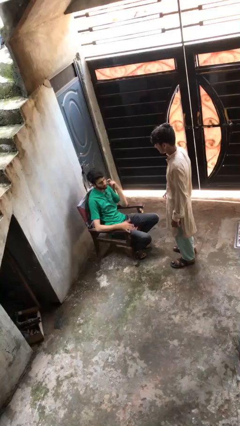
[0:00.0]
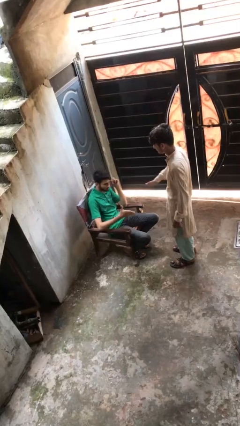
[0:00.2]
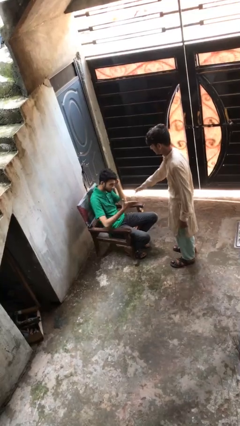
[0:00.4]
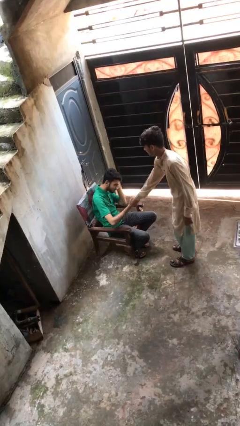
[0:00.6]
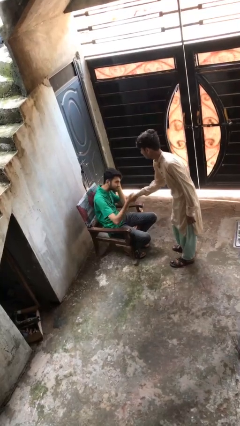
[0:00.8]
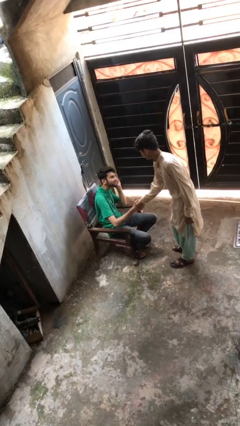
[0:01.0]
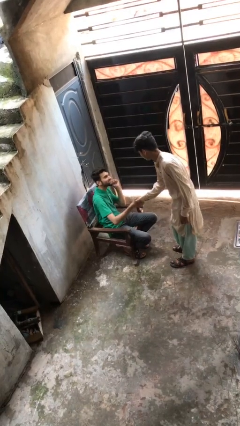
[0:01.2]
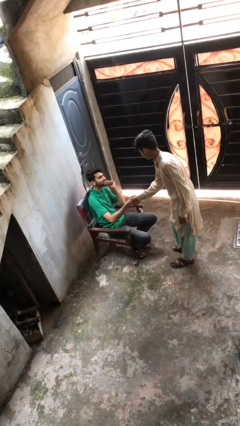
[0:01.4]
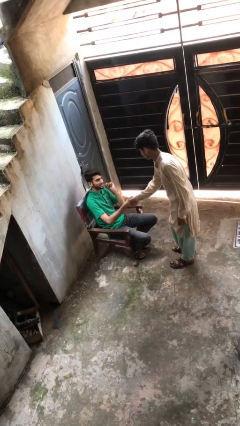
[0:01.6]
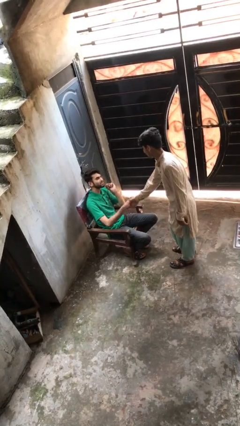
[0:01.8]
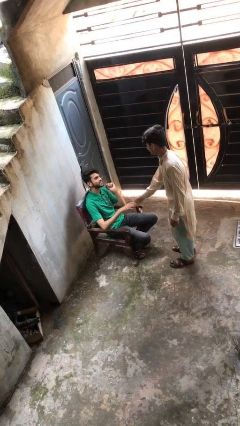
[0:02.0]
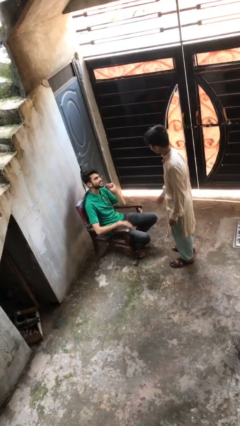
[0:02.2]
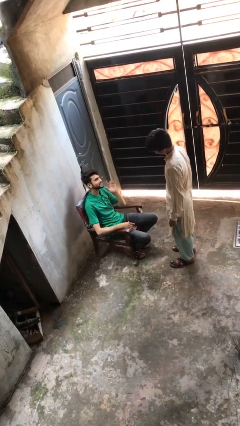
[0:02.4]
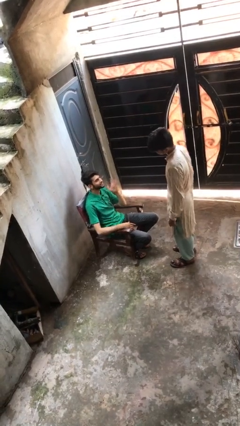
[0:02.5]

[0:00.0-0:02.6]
person shakes hand

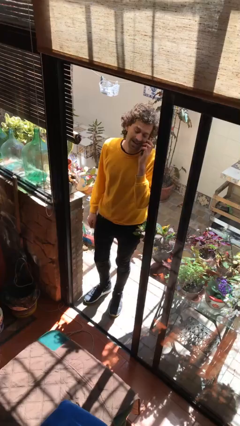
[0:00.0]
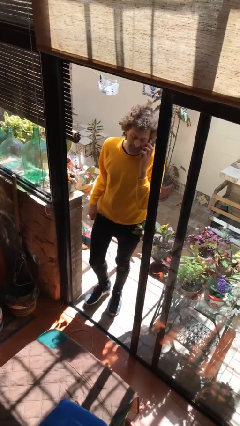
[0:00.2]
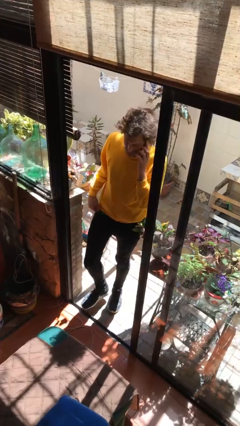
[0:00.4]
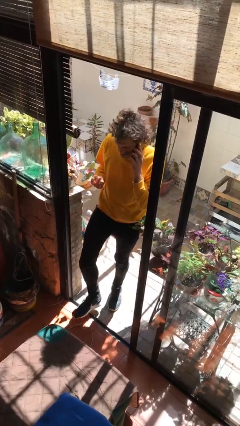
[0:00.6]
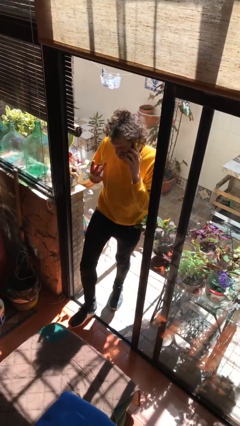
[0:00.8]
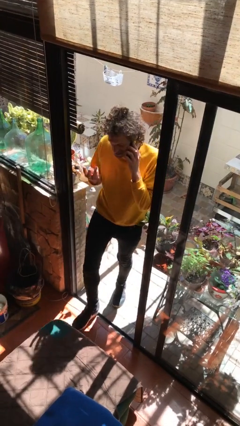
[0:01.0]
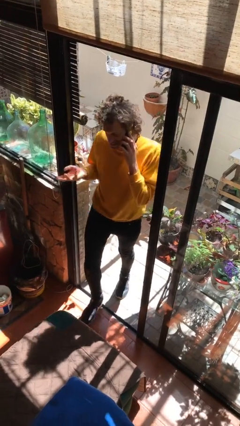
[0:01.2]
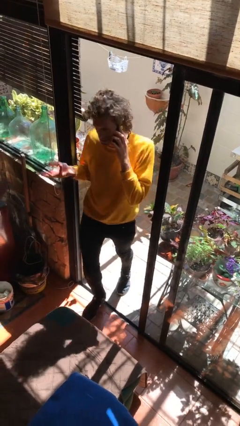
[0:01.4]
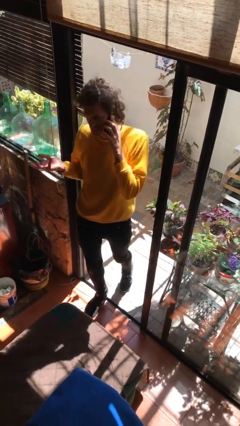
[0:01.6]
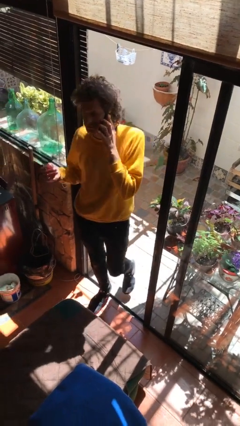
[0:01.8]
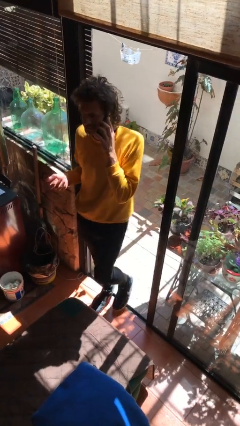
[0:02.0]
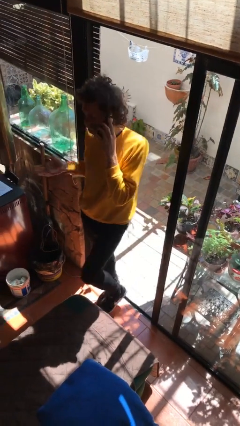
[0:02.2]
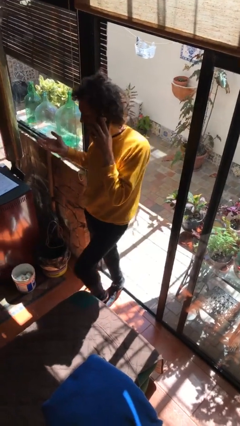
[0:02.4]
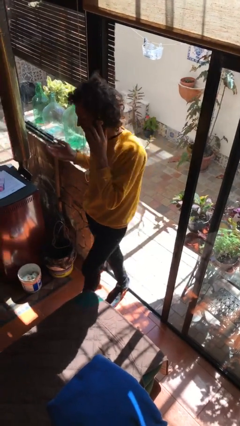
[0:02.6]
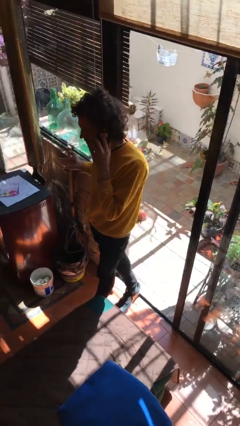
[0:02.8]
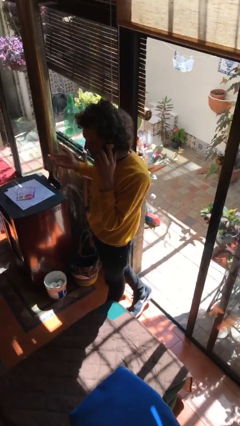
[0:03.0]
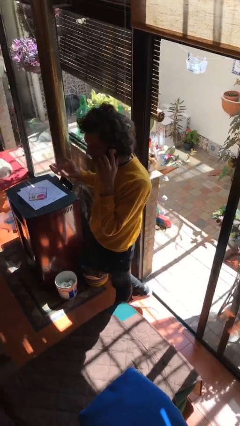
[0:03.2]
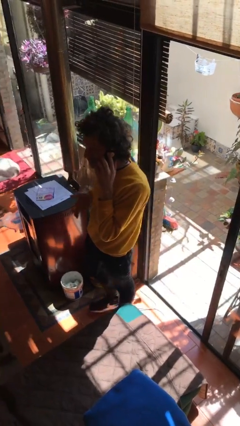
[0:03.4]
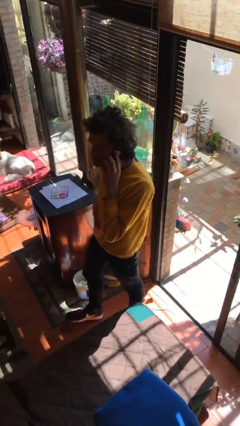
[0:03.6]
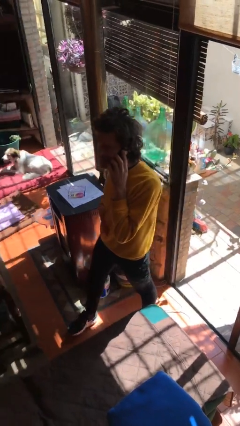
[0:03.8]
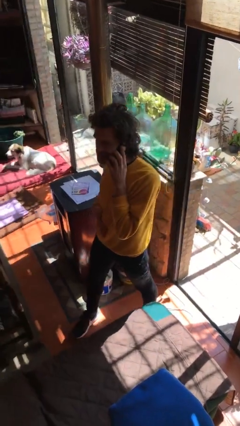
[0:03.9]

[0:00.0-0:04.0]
person enters scene through structure

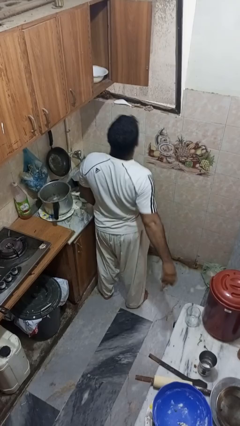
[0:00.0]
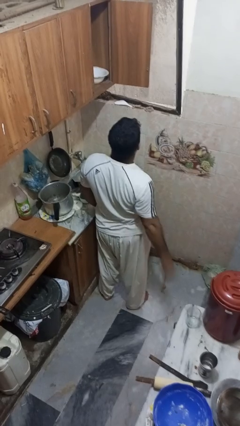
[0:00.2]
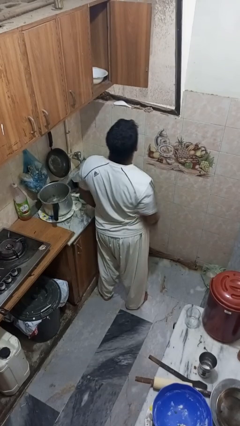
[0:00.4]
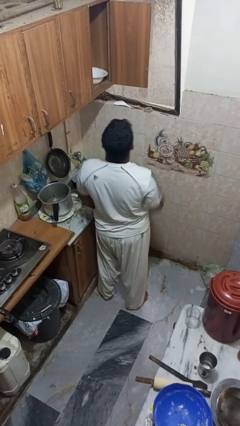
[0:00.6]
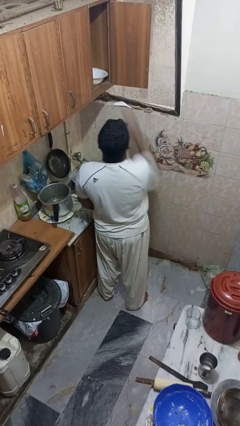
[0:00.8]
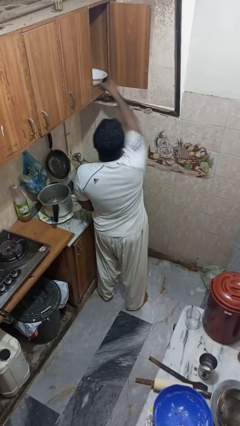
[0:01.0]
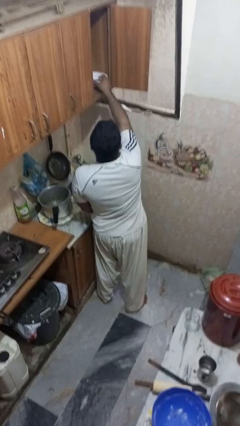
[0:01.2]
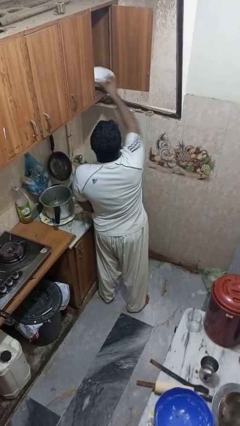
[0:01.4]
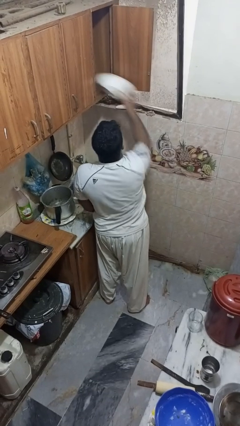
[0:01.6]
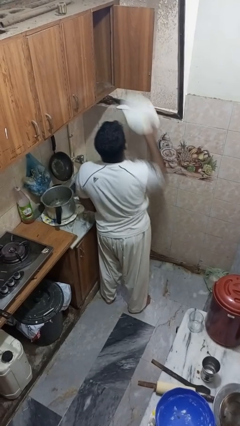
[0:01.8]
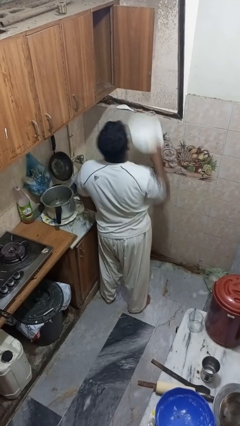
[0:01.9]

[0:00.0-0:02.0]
person takes object from cabinet

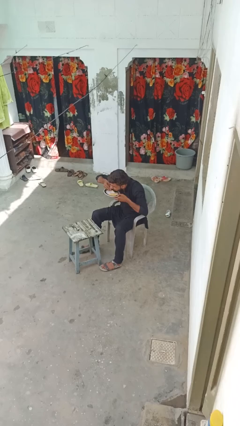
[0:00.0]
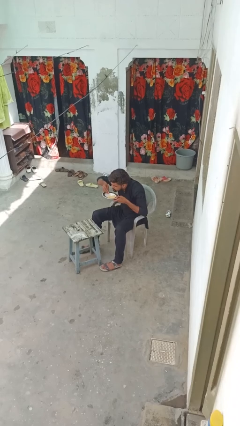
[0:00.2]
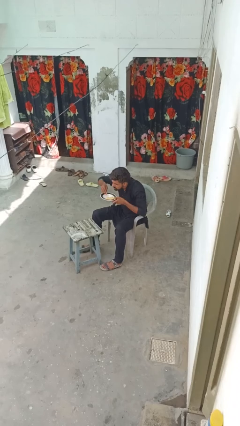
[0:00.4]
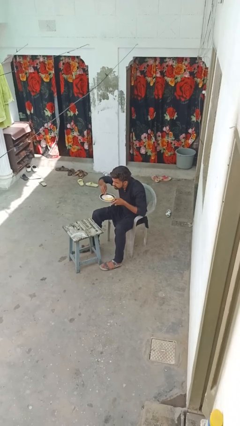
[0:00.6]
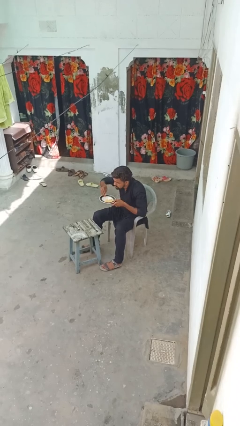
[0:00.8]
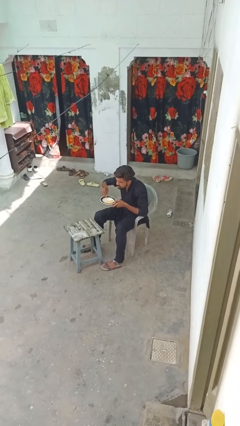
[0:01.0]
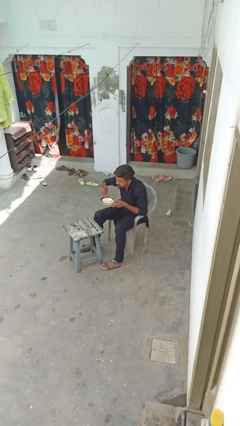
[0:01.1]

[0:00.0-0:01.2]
person eats with hands

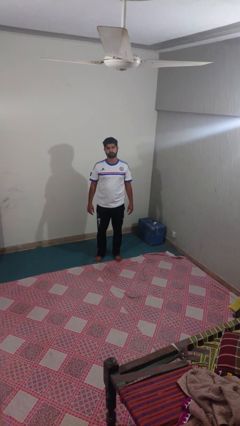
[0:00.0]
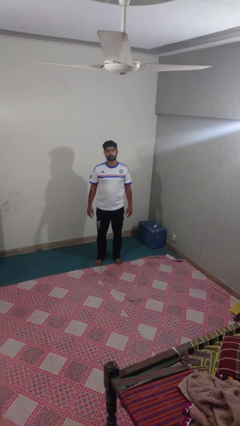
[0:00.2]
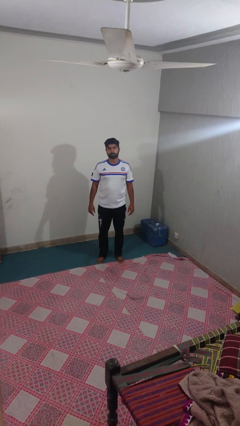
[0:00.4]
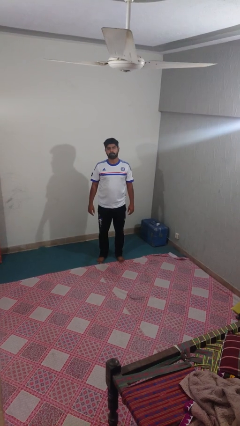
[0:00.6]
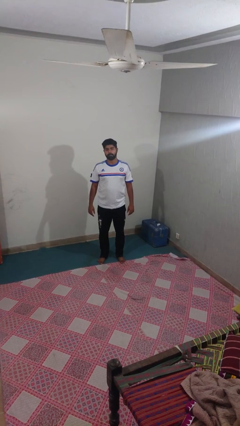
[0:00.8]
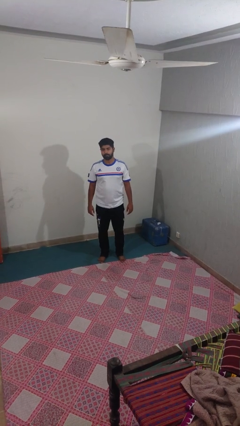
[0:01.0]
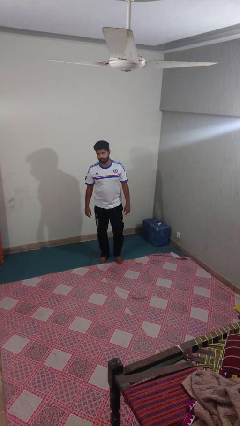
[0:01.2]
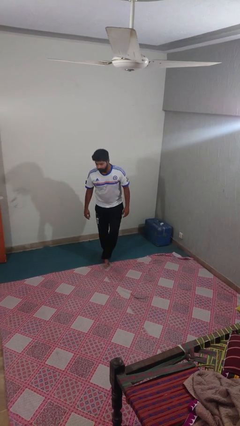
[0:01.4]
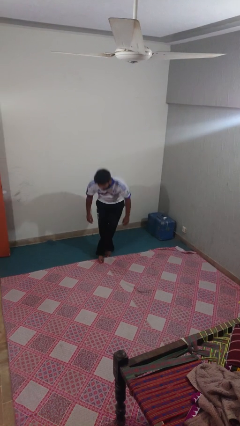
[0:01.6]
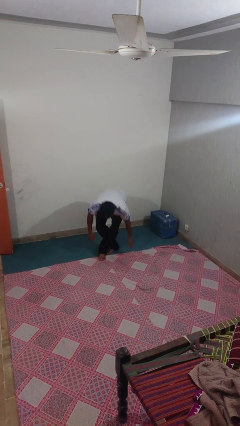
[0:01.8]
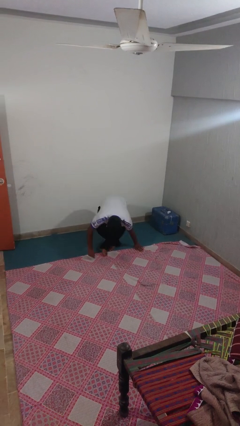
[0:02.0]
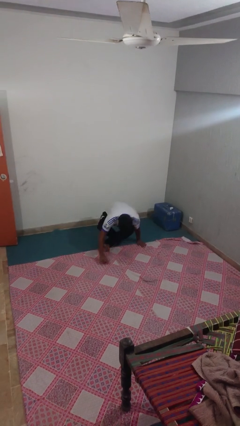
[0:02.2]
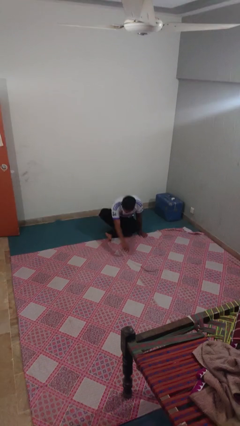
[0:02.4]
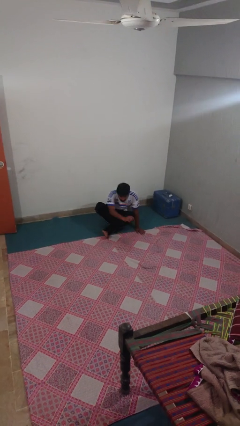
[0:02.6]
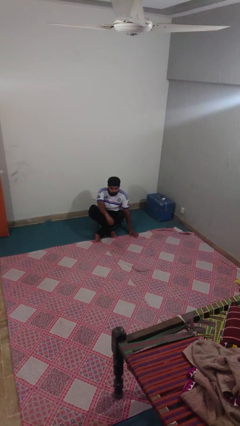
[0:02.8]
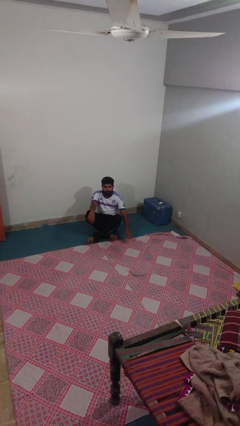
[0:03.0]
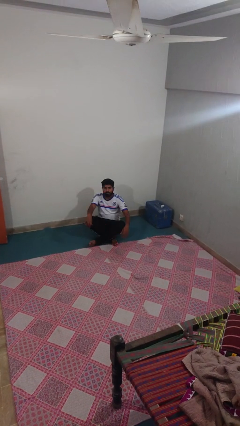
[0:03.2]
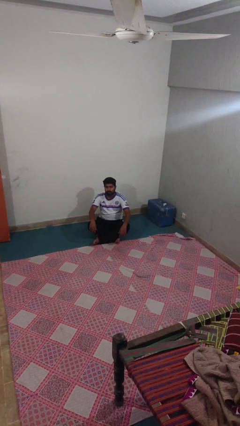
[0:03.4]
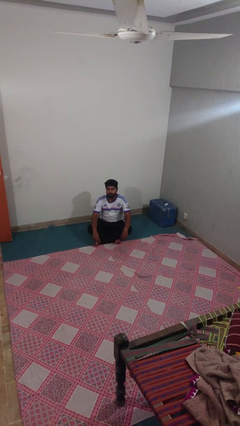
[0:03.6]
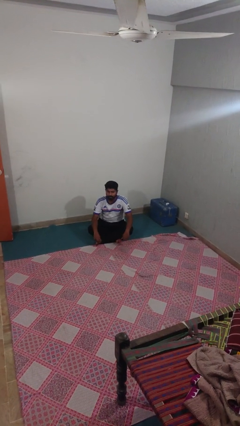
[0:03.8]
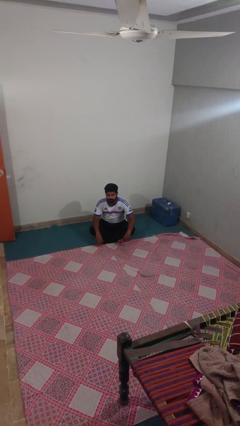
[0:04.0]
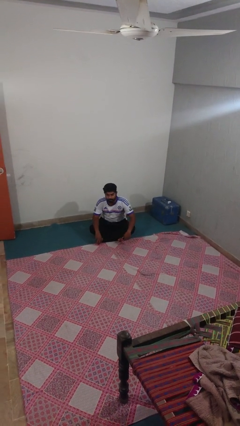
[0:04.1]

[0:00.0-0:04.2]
person sits crisscross

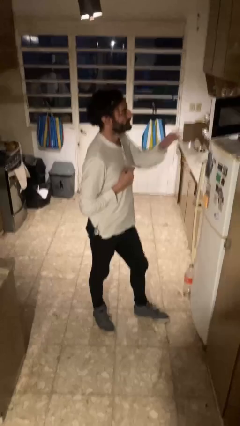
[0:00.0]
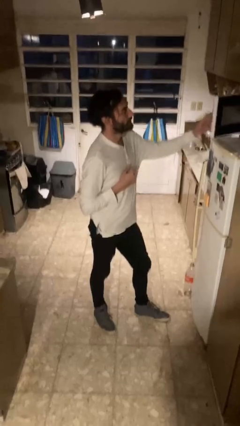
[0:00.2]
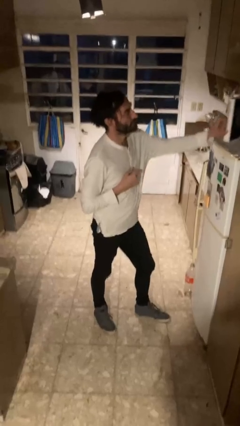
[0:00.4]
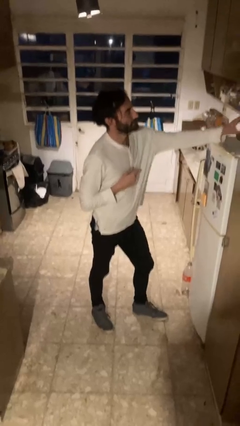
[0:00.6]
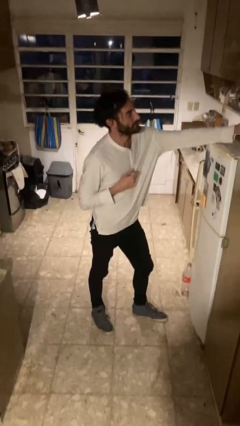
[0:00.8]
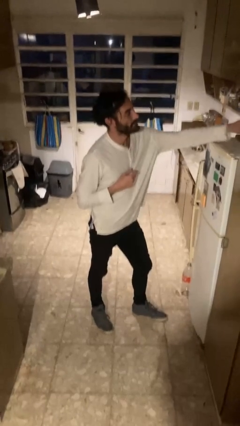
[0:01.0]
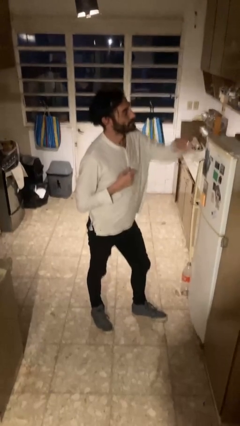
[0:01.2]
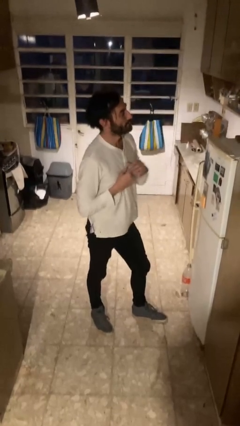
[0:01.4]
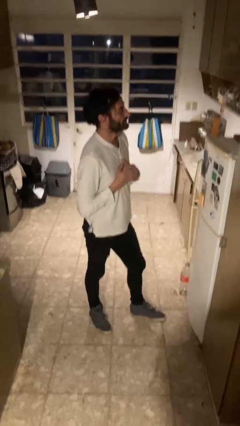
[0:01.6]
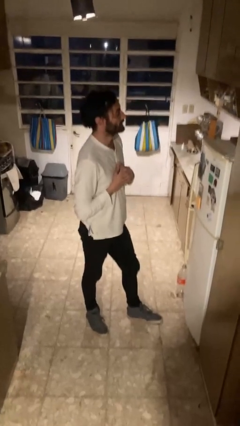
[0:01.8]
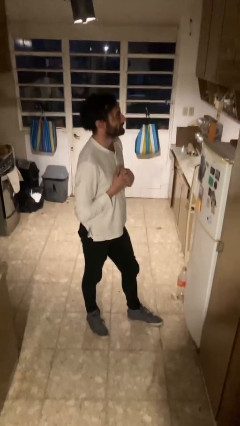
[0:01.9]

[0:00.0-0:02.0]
person closes microwave

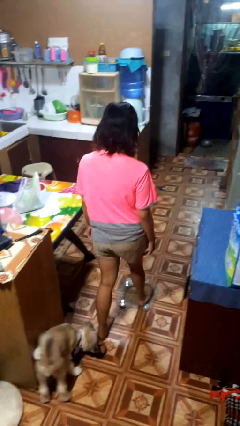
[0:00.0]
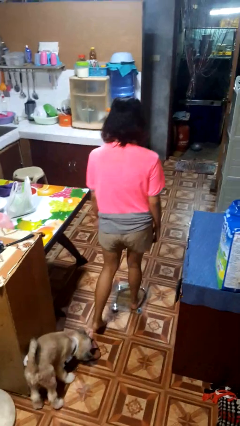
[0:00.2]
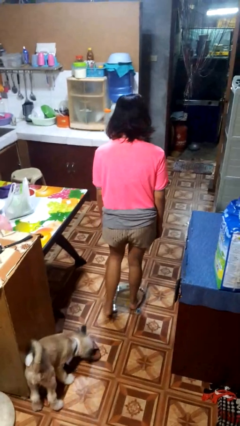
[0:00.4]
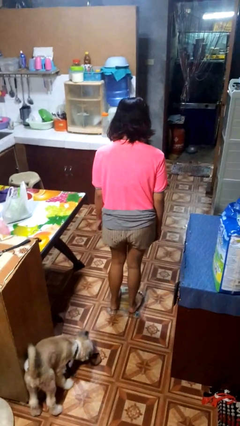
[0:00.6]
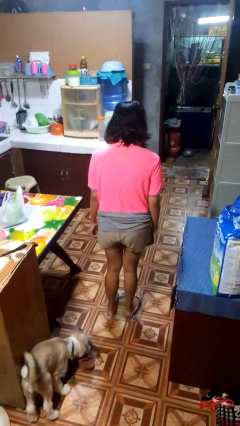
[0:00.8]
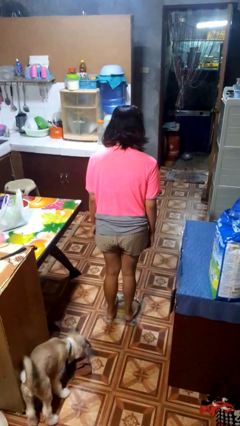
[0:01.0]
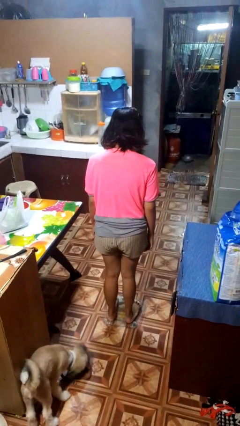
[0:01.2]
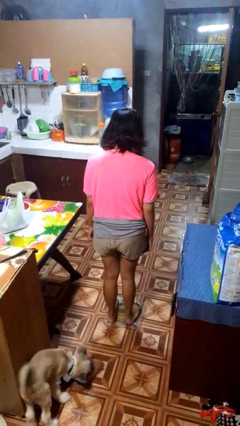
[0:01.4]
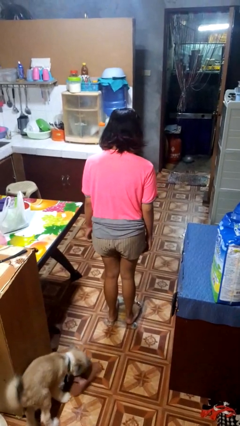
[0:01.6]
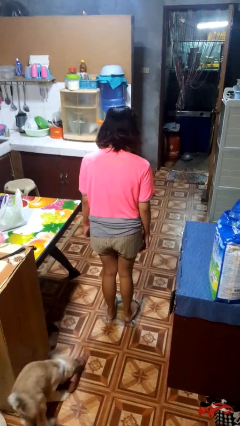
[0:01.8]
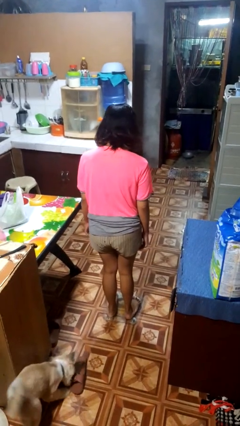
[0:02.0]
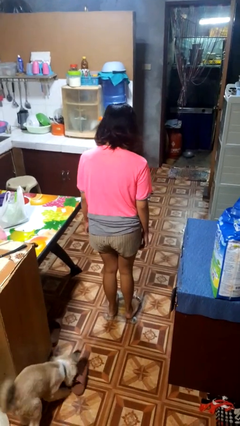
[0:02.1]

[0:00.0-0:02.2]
person uses bodyweight scale
